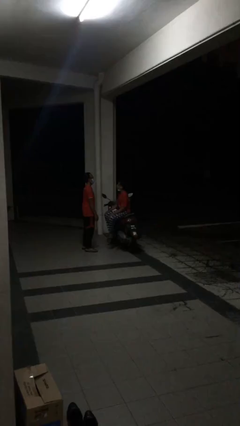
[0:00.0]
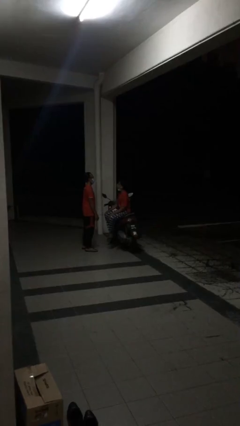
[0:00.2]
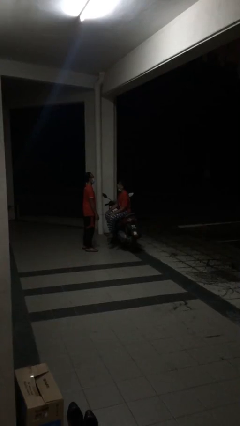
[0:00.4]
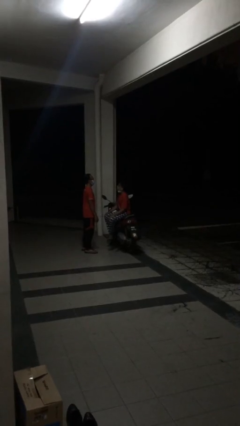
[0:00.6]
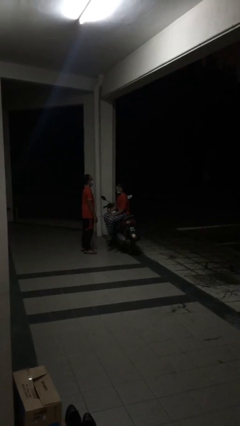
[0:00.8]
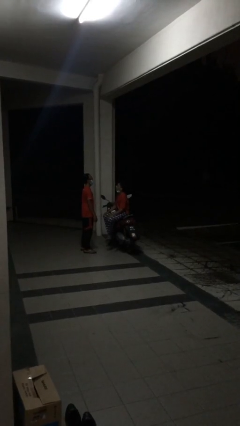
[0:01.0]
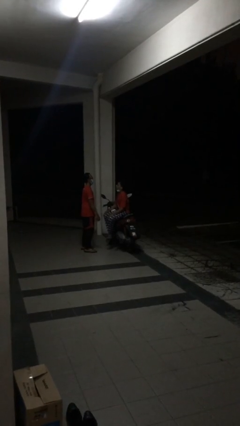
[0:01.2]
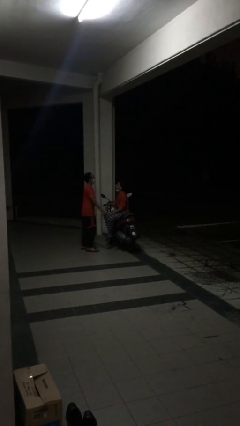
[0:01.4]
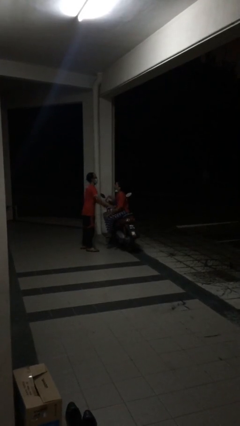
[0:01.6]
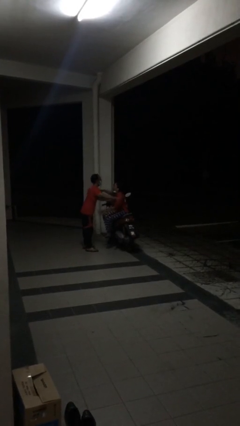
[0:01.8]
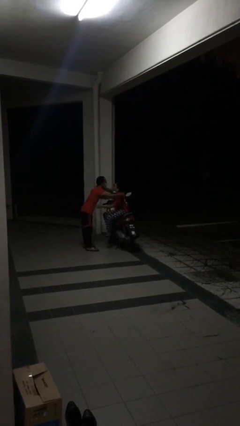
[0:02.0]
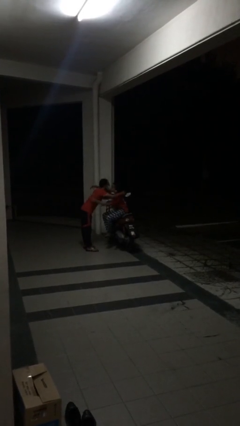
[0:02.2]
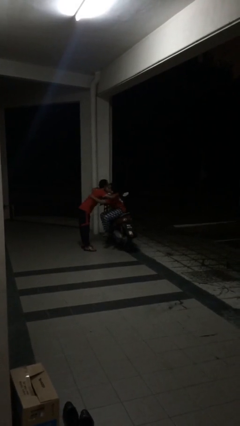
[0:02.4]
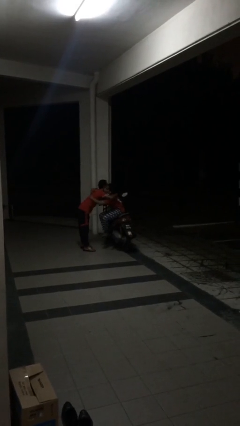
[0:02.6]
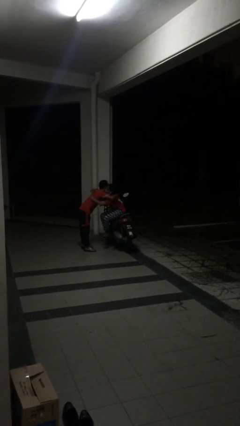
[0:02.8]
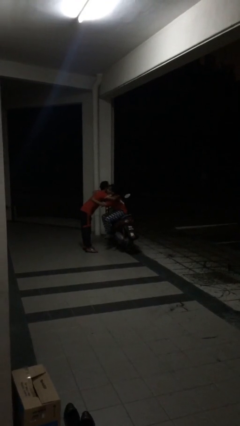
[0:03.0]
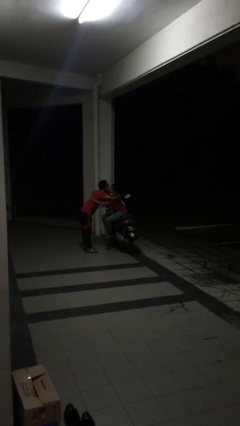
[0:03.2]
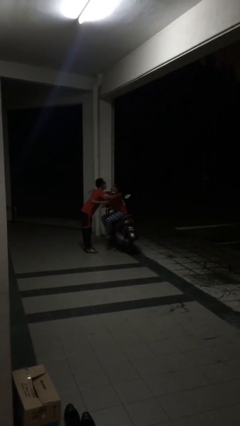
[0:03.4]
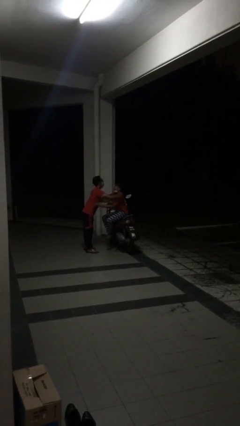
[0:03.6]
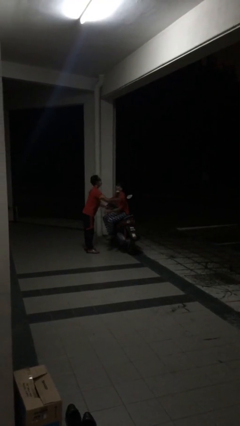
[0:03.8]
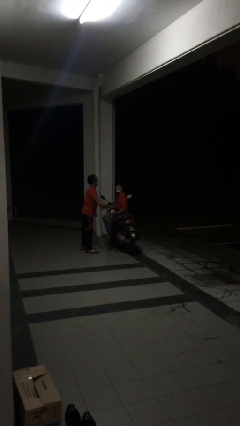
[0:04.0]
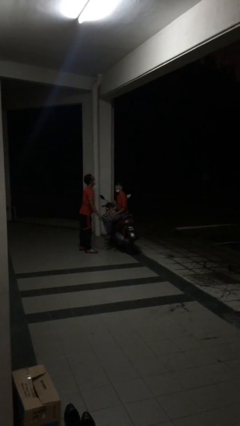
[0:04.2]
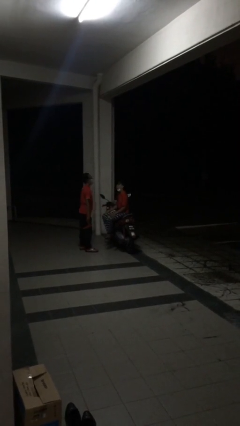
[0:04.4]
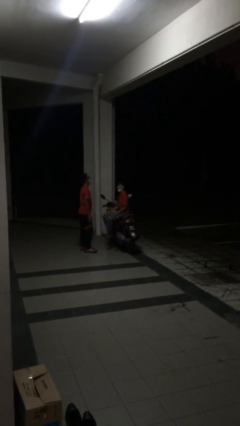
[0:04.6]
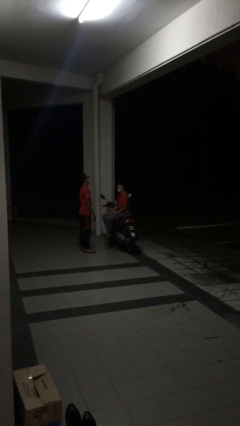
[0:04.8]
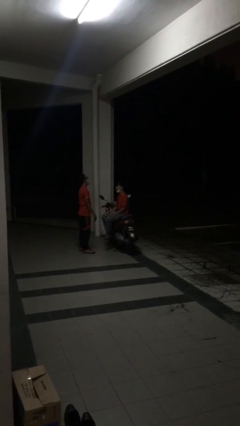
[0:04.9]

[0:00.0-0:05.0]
person embraces person

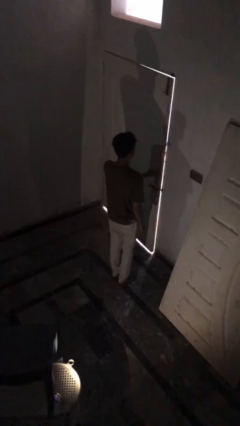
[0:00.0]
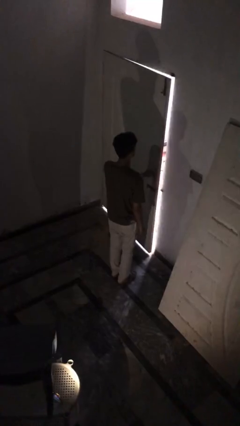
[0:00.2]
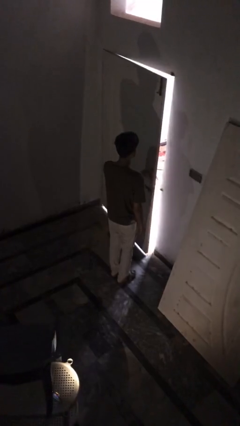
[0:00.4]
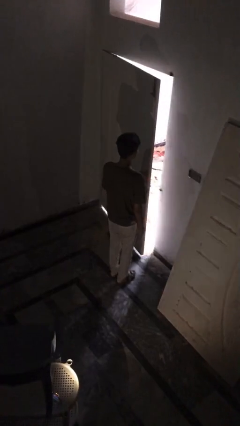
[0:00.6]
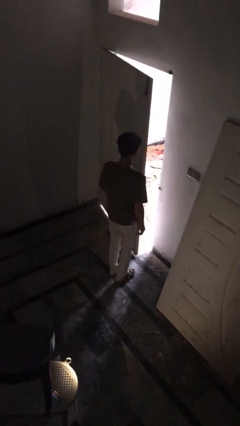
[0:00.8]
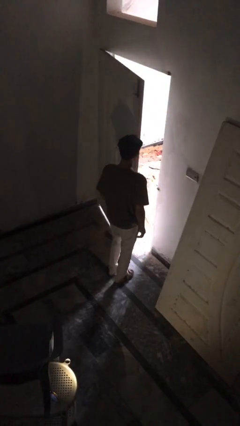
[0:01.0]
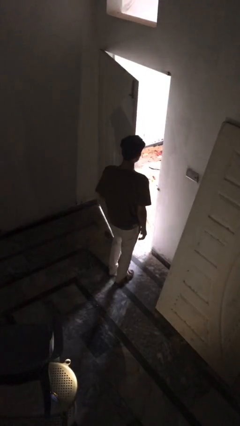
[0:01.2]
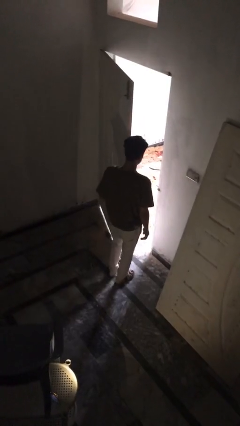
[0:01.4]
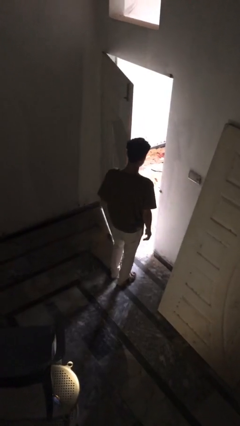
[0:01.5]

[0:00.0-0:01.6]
person opens facility door

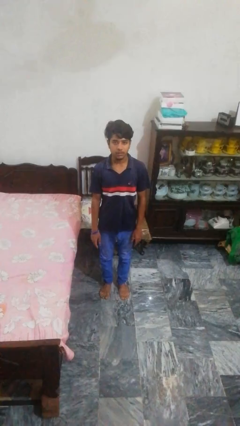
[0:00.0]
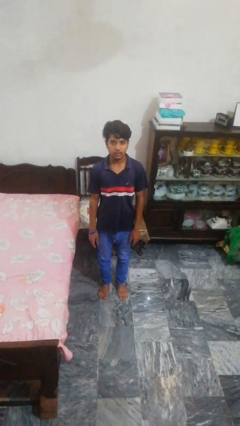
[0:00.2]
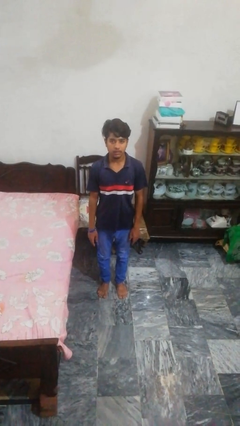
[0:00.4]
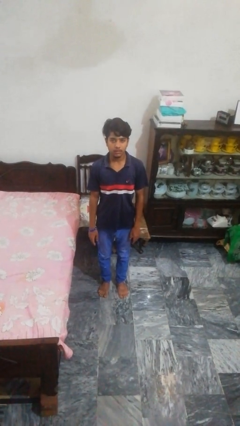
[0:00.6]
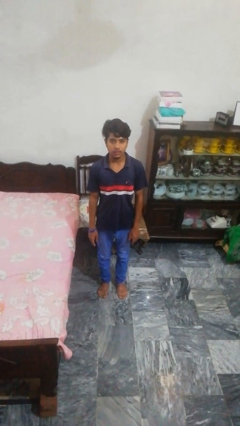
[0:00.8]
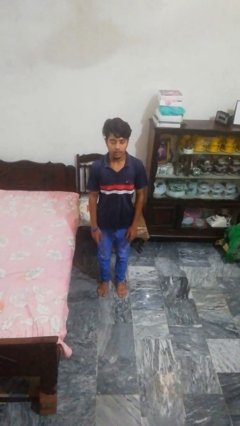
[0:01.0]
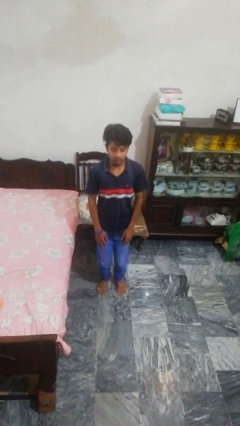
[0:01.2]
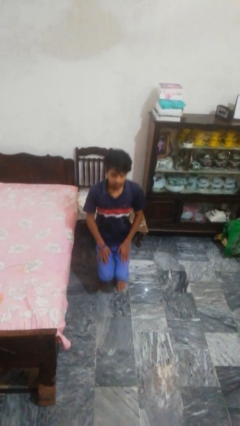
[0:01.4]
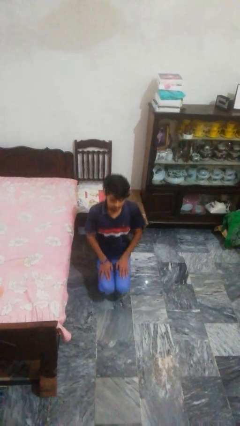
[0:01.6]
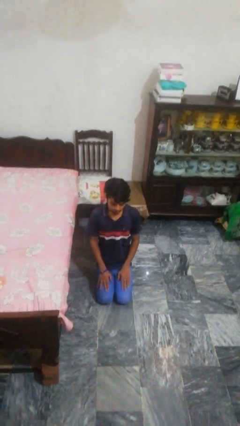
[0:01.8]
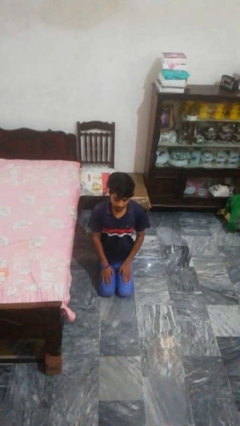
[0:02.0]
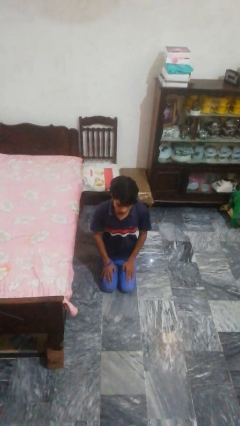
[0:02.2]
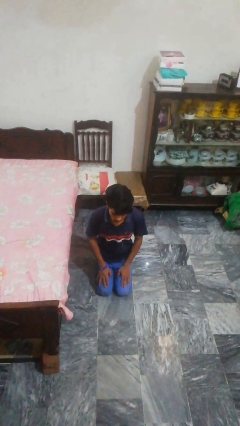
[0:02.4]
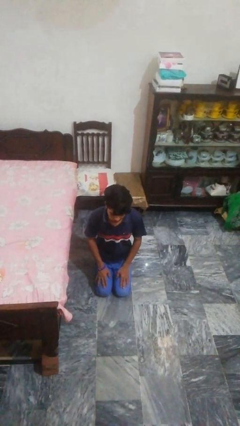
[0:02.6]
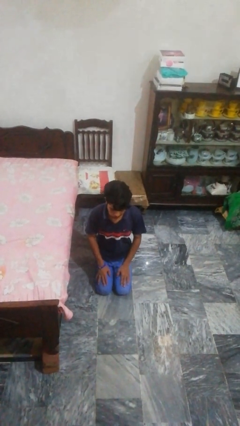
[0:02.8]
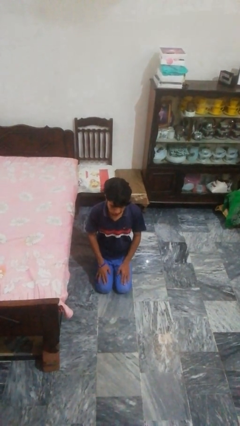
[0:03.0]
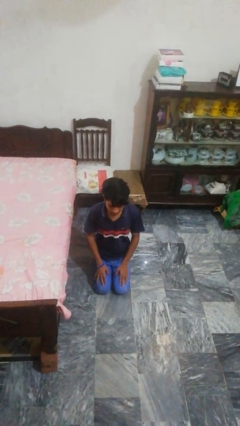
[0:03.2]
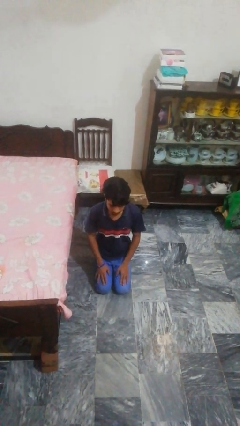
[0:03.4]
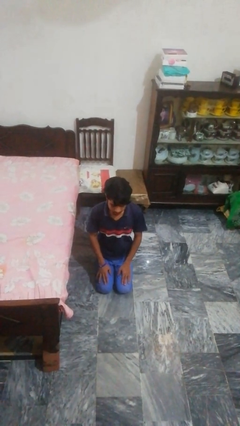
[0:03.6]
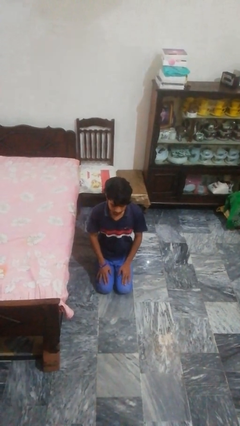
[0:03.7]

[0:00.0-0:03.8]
person kneels

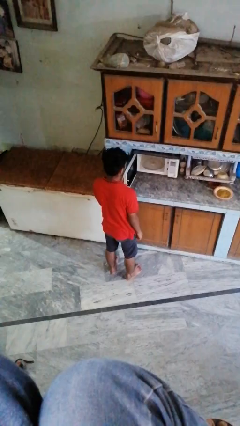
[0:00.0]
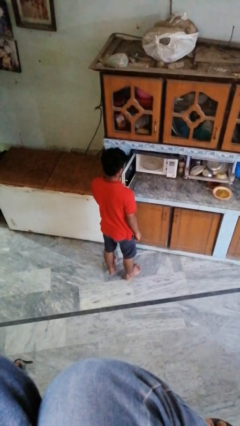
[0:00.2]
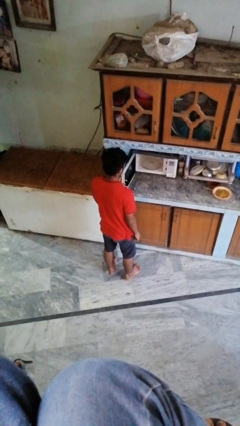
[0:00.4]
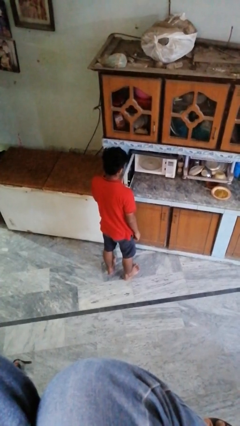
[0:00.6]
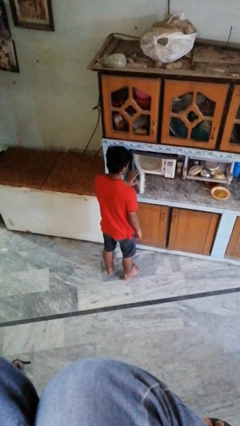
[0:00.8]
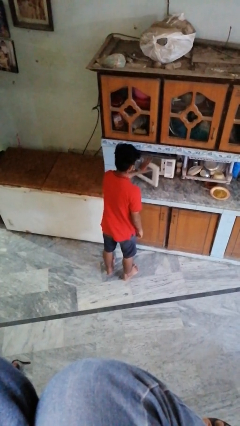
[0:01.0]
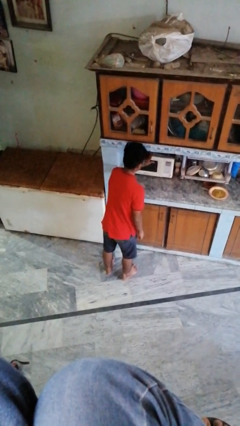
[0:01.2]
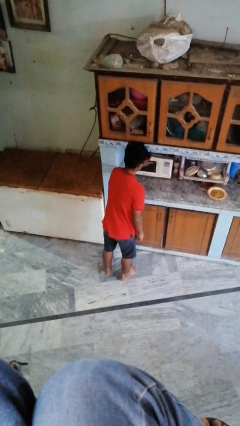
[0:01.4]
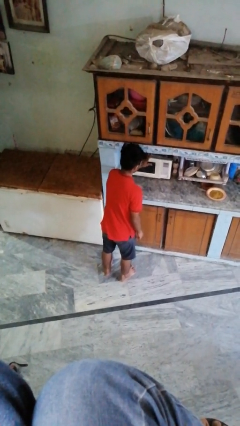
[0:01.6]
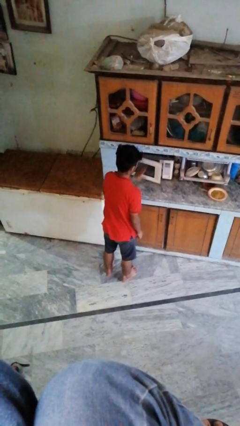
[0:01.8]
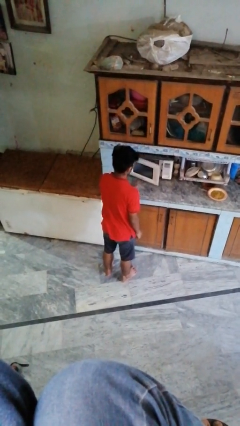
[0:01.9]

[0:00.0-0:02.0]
person closes oven door

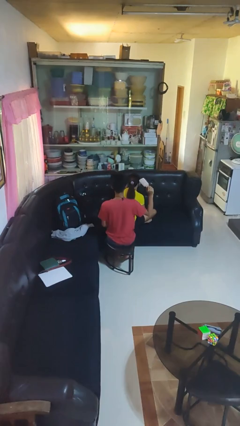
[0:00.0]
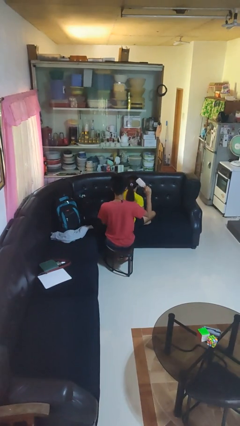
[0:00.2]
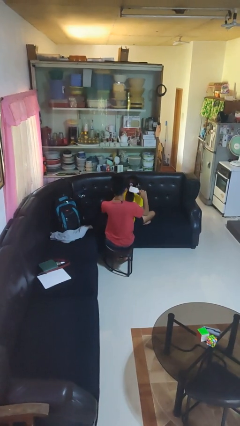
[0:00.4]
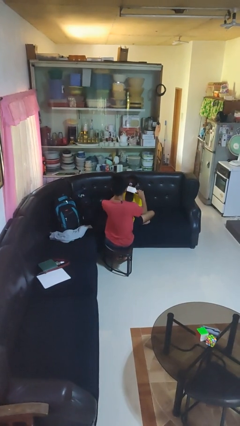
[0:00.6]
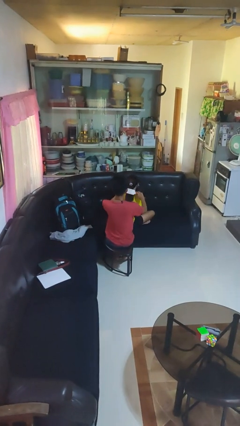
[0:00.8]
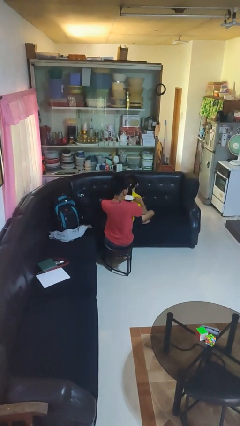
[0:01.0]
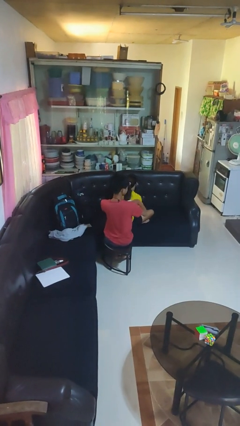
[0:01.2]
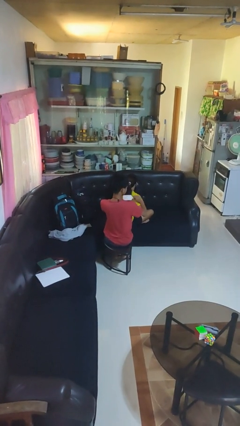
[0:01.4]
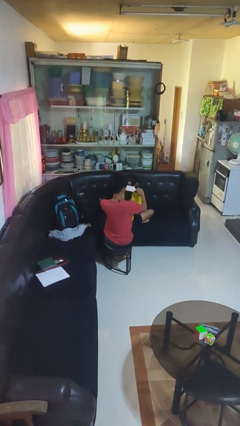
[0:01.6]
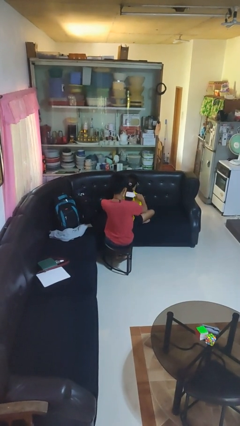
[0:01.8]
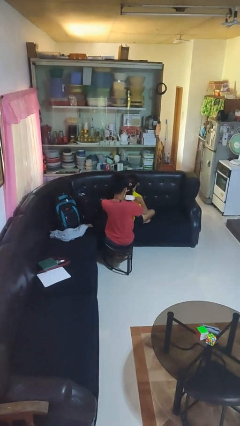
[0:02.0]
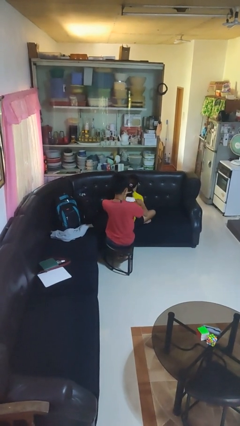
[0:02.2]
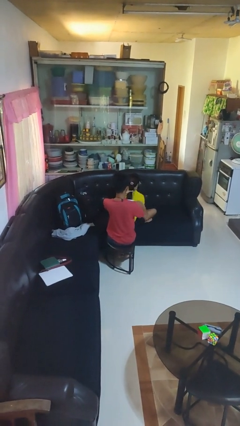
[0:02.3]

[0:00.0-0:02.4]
person brushes hair of person

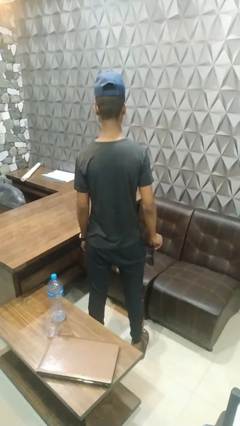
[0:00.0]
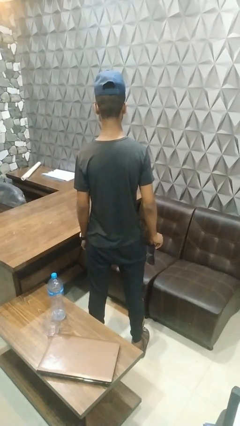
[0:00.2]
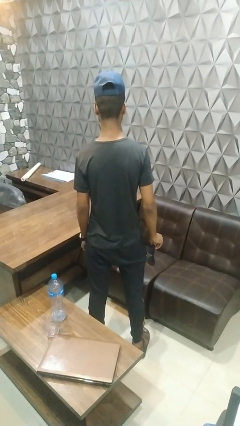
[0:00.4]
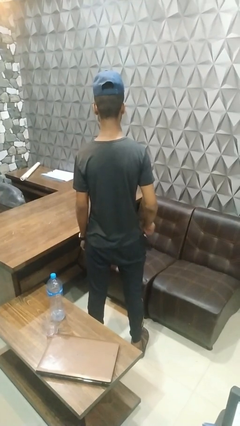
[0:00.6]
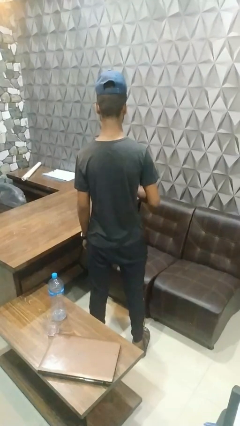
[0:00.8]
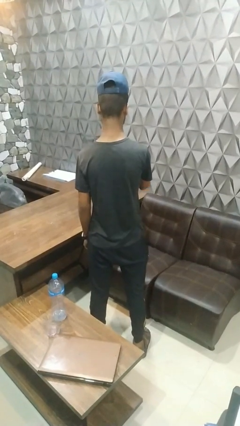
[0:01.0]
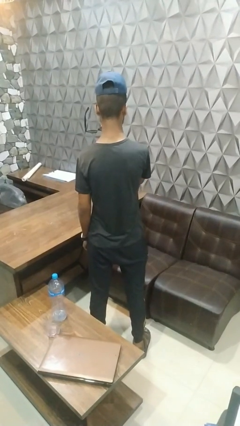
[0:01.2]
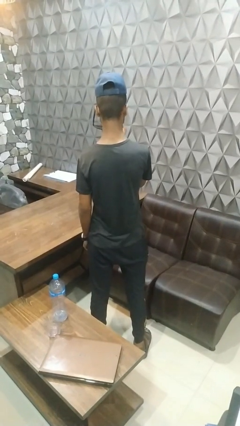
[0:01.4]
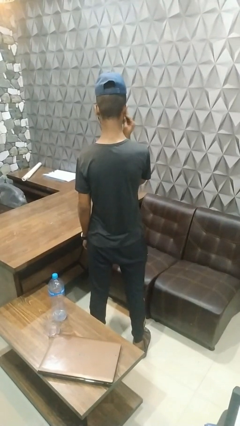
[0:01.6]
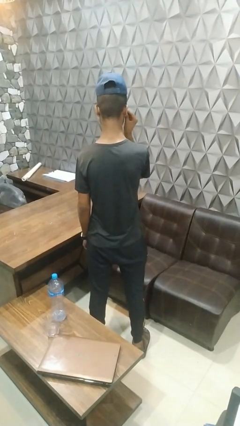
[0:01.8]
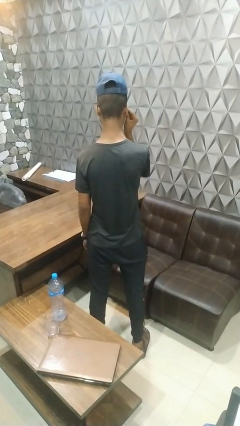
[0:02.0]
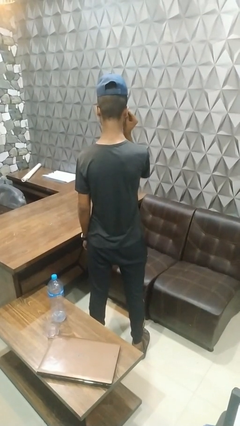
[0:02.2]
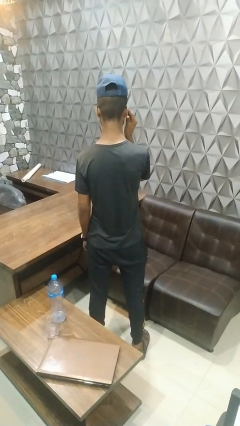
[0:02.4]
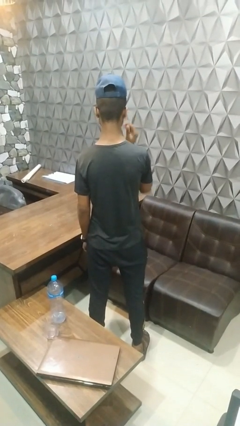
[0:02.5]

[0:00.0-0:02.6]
person puts on sunglasses
